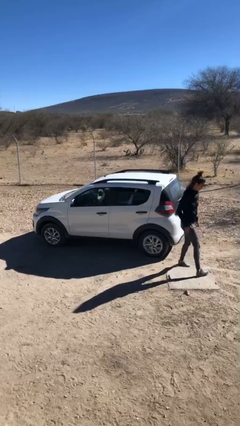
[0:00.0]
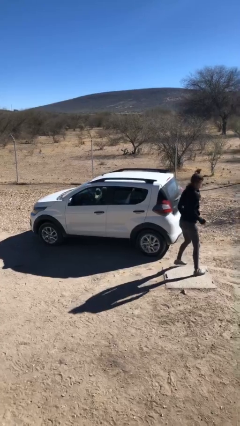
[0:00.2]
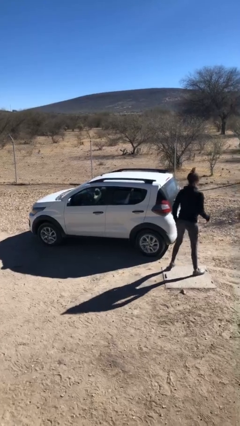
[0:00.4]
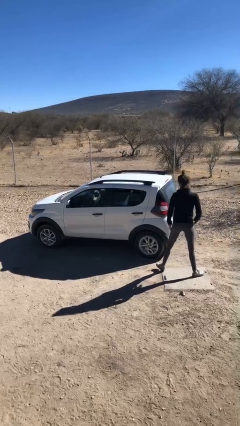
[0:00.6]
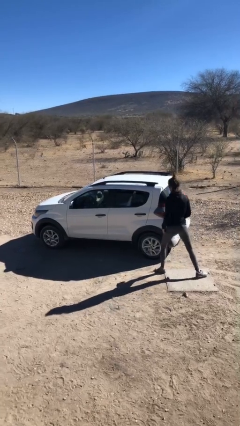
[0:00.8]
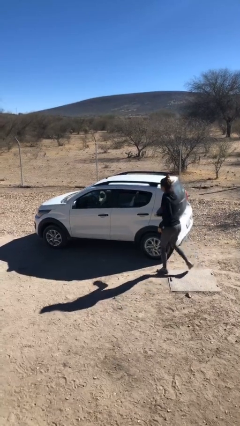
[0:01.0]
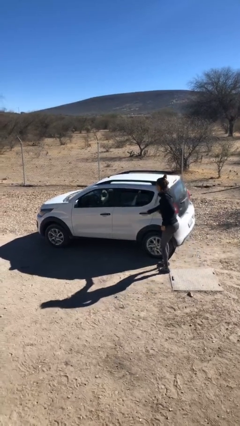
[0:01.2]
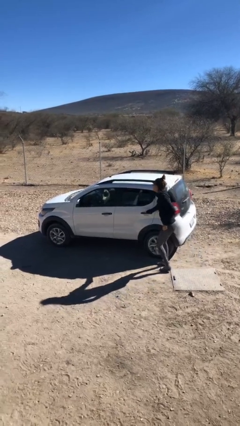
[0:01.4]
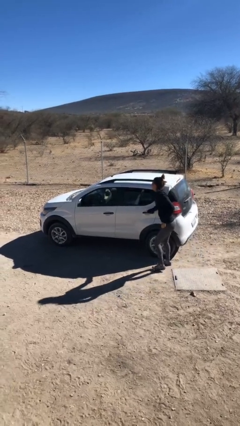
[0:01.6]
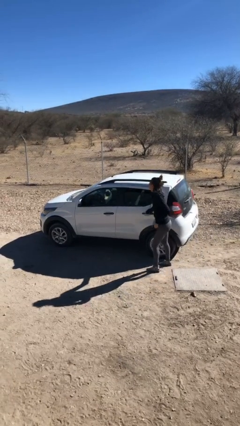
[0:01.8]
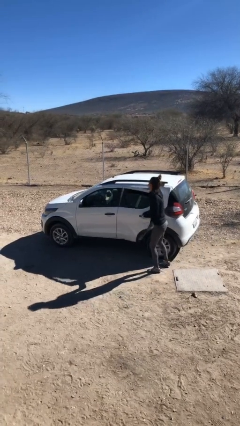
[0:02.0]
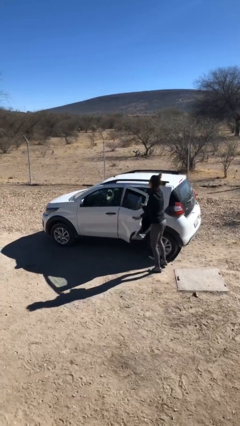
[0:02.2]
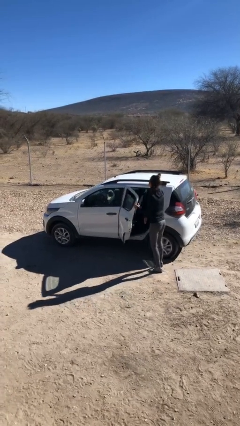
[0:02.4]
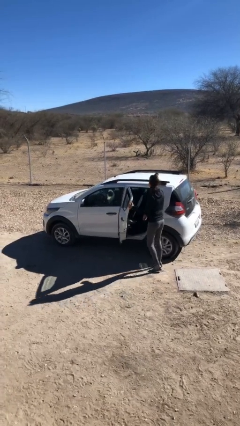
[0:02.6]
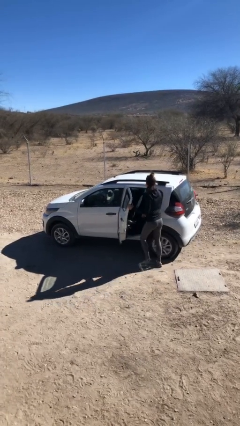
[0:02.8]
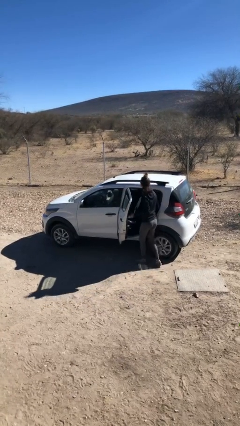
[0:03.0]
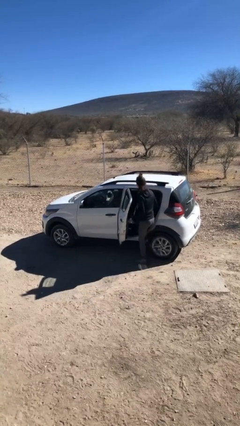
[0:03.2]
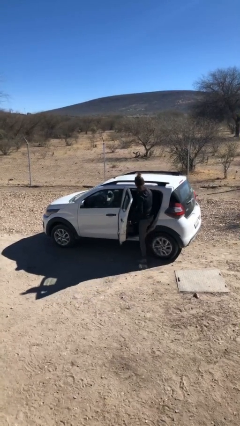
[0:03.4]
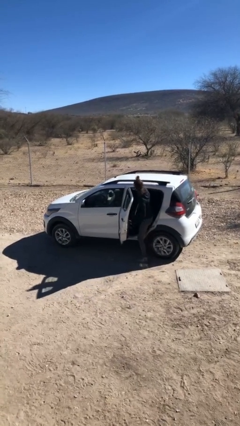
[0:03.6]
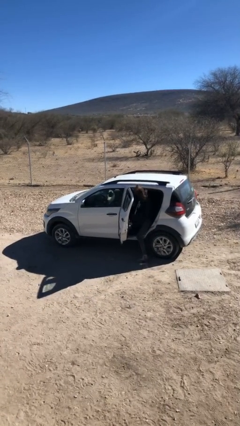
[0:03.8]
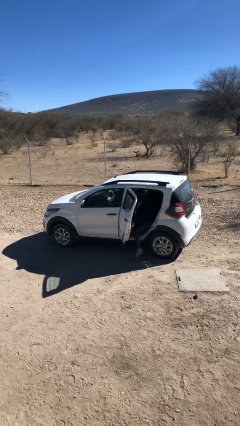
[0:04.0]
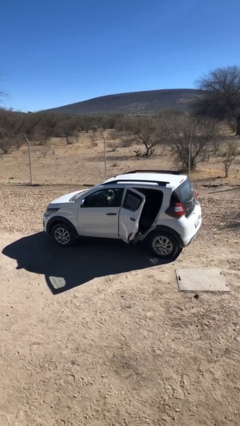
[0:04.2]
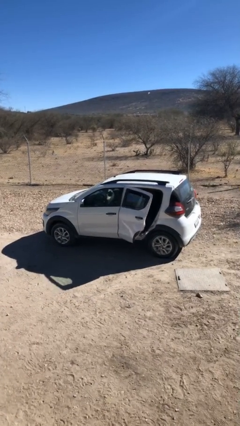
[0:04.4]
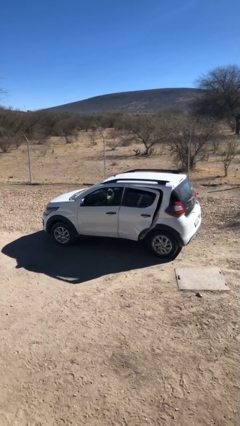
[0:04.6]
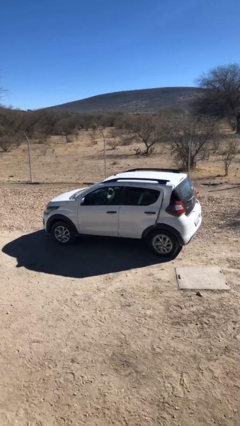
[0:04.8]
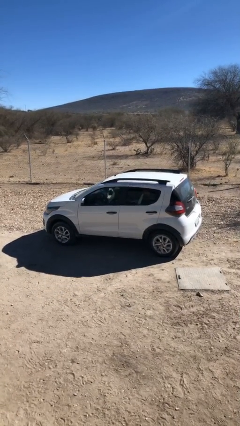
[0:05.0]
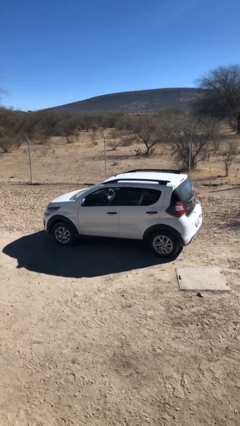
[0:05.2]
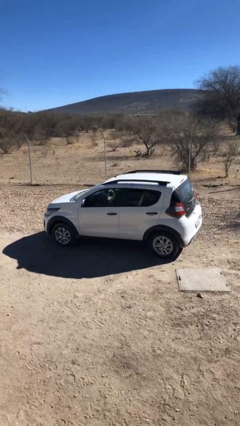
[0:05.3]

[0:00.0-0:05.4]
car picks up person

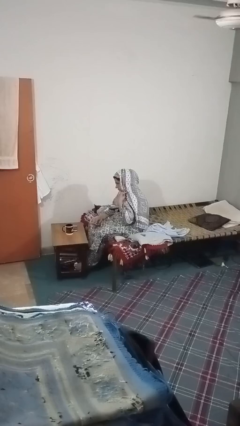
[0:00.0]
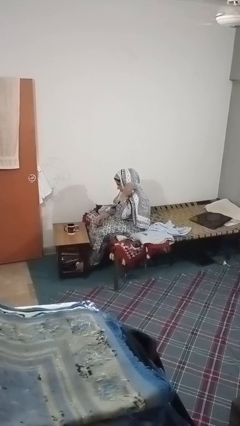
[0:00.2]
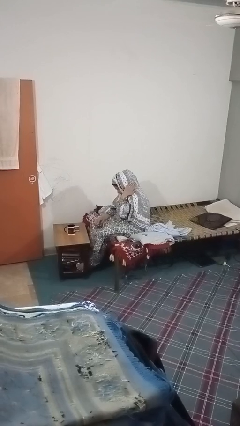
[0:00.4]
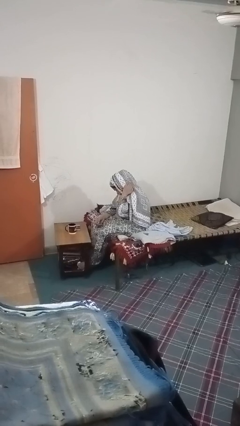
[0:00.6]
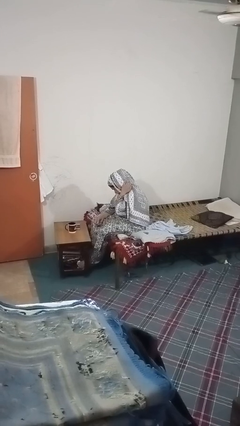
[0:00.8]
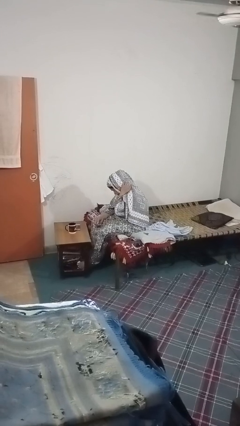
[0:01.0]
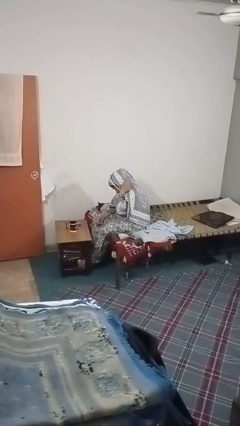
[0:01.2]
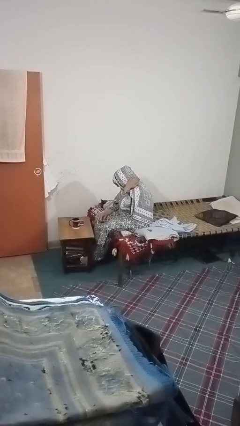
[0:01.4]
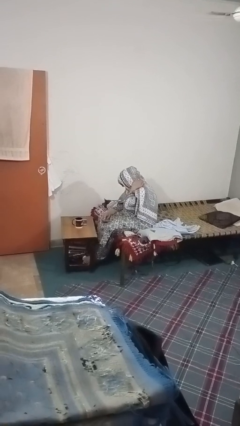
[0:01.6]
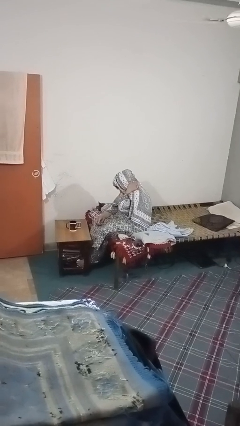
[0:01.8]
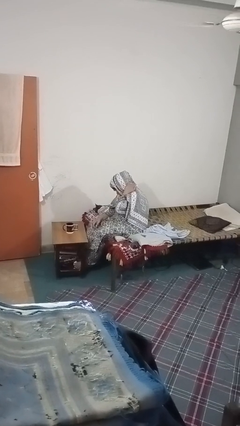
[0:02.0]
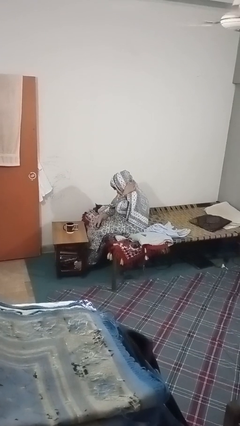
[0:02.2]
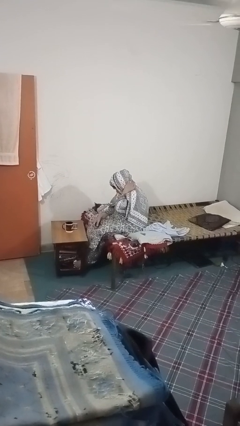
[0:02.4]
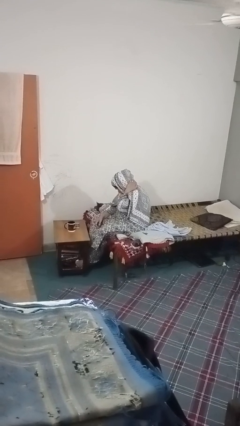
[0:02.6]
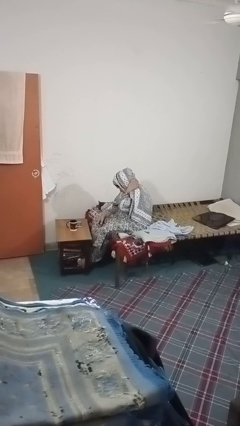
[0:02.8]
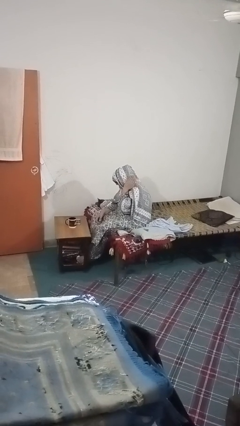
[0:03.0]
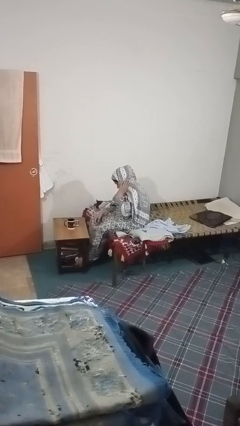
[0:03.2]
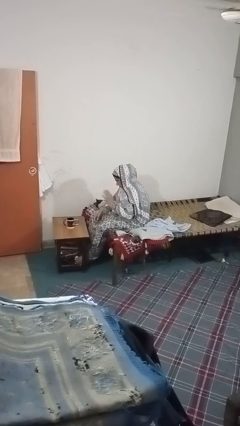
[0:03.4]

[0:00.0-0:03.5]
person rubs neck

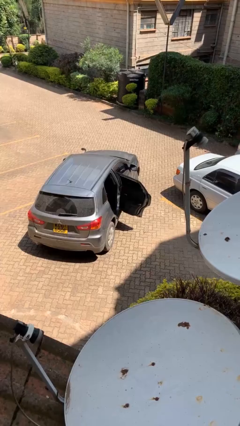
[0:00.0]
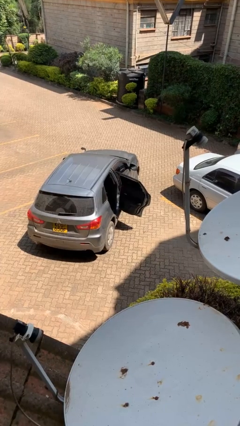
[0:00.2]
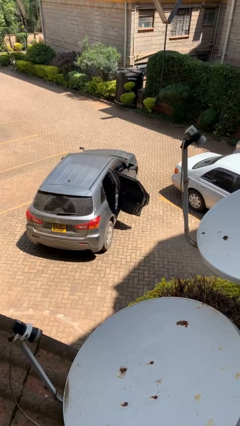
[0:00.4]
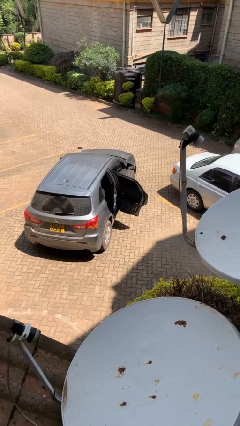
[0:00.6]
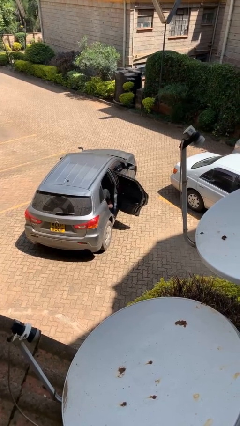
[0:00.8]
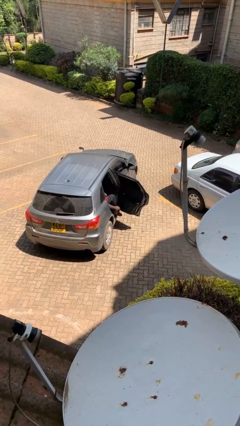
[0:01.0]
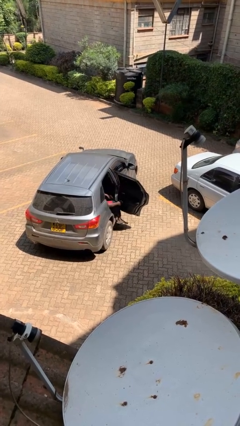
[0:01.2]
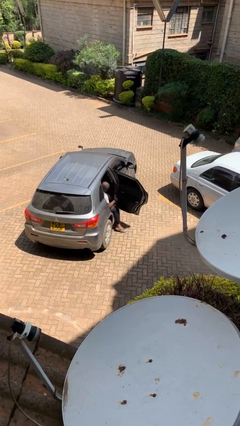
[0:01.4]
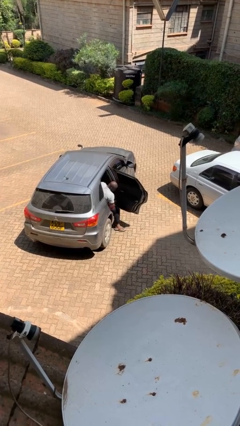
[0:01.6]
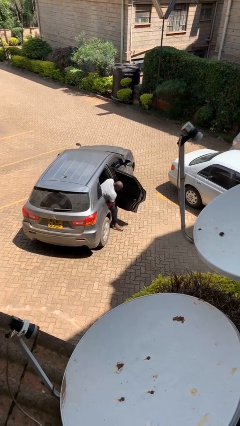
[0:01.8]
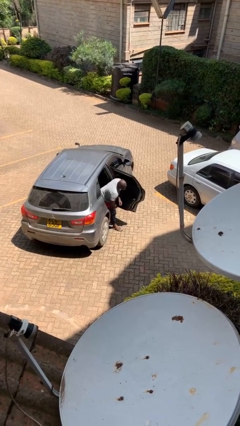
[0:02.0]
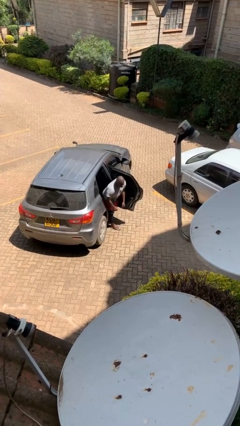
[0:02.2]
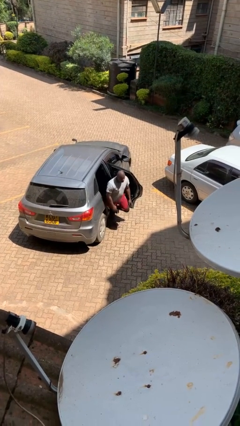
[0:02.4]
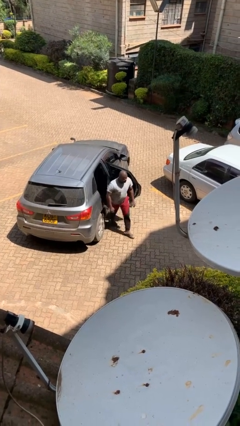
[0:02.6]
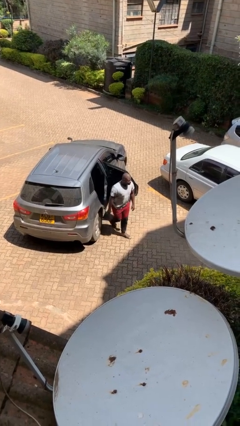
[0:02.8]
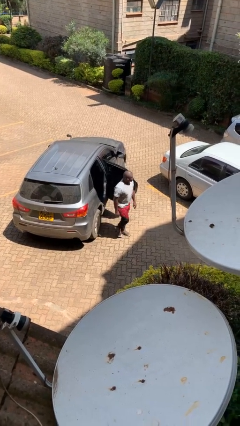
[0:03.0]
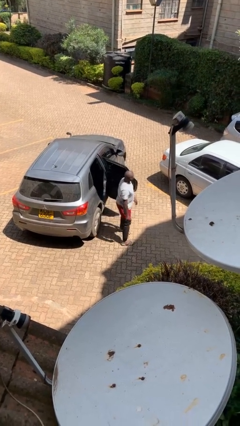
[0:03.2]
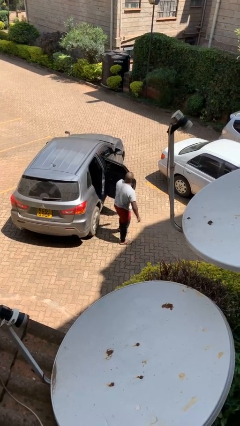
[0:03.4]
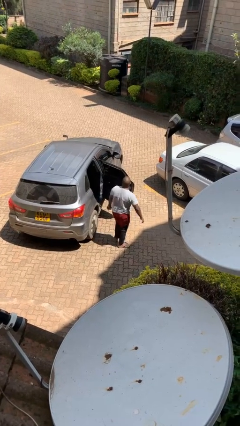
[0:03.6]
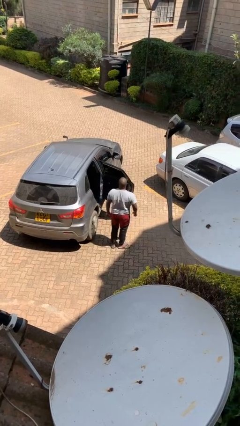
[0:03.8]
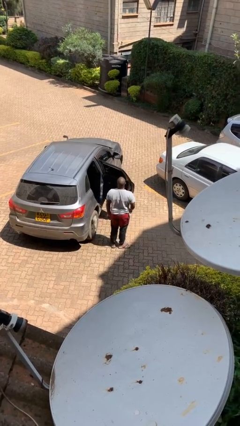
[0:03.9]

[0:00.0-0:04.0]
person exits car

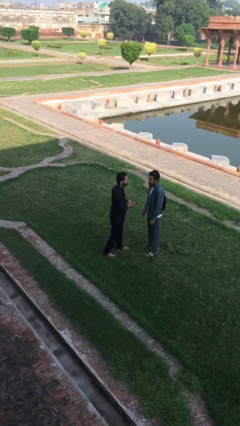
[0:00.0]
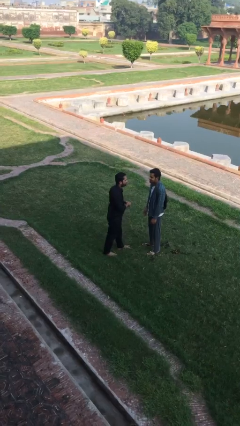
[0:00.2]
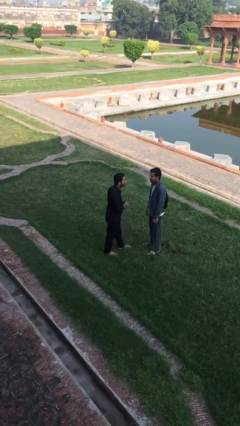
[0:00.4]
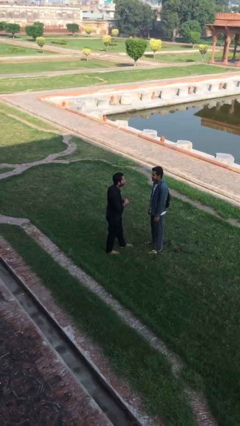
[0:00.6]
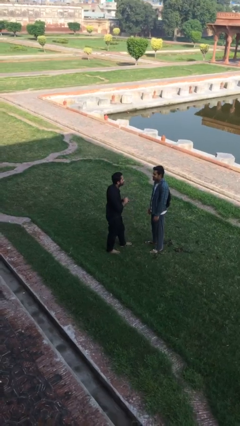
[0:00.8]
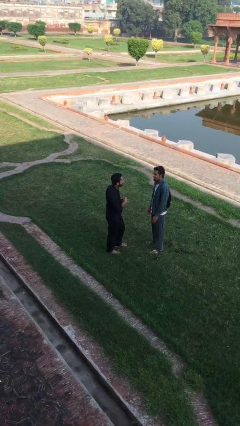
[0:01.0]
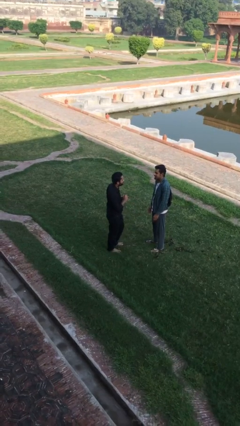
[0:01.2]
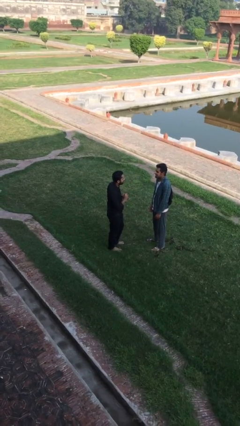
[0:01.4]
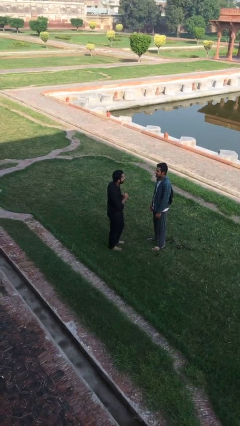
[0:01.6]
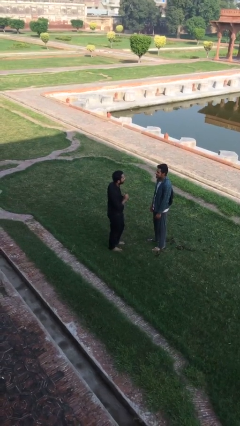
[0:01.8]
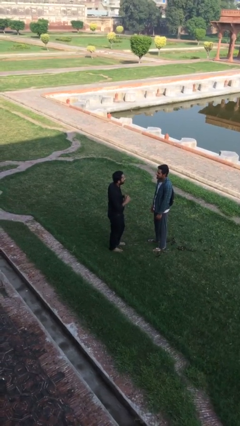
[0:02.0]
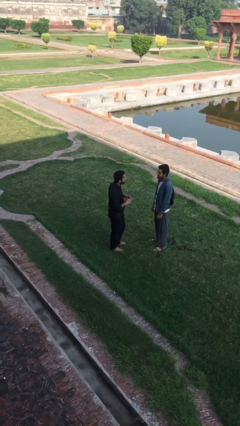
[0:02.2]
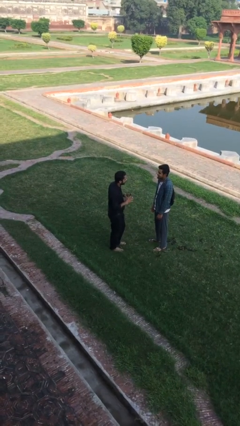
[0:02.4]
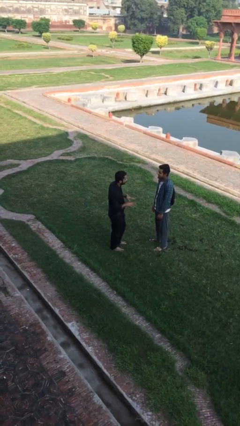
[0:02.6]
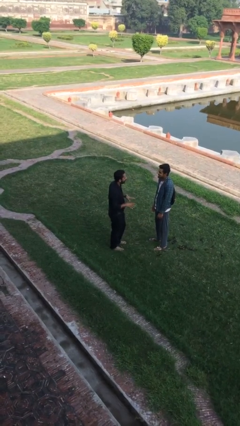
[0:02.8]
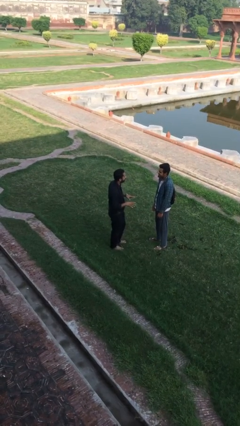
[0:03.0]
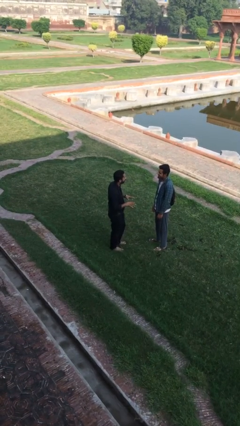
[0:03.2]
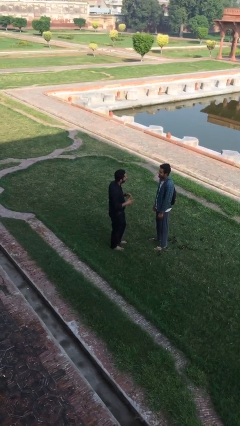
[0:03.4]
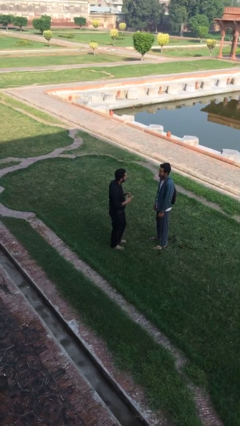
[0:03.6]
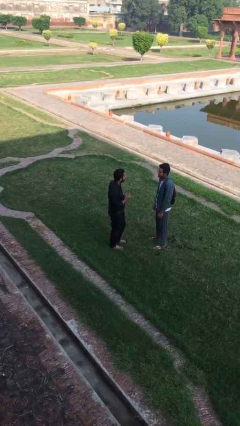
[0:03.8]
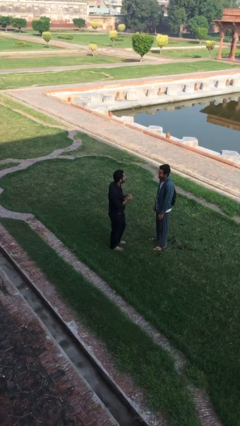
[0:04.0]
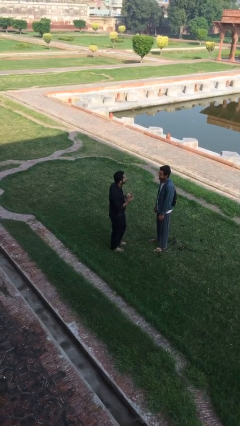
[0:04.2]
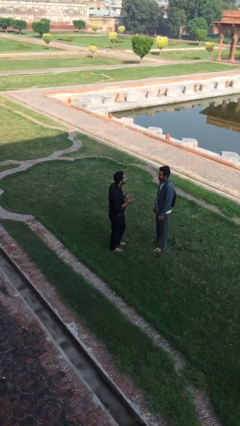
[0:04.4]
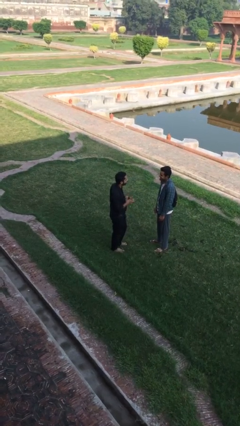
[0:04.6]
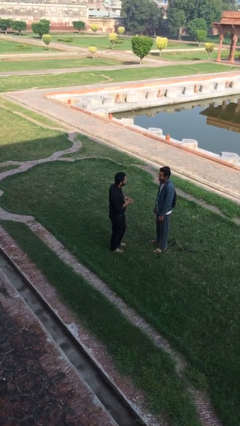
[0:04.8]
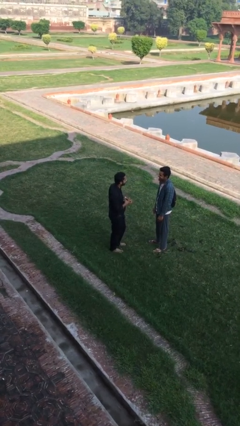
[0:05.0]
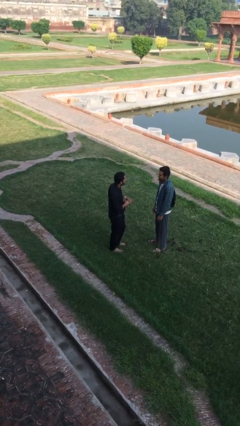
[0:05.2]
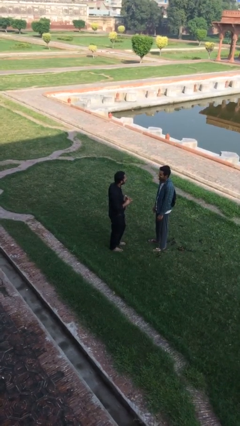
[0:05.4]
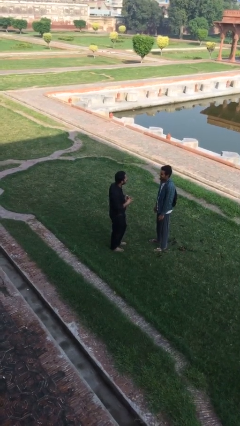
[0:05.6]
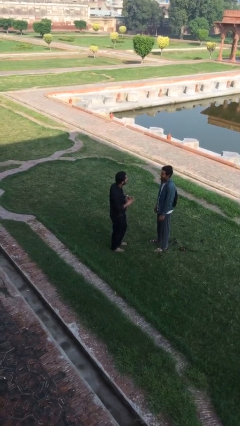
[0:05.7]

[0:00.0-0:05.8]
person talks to person
